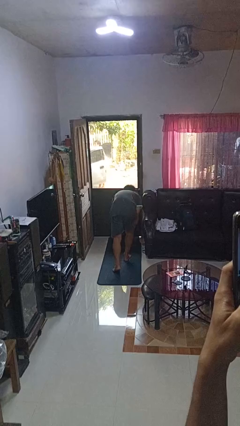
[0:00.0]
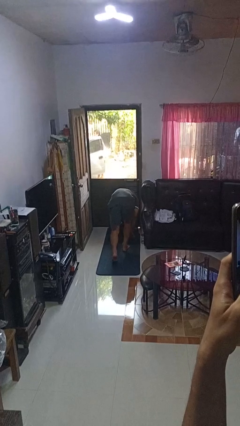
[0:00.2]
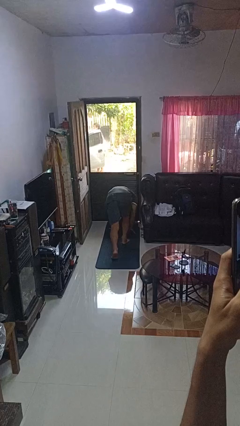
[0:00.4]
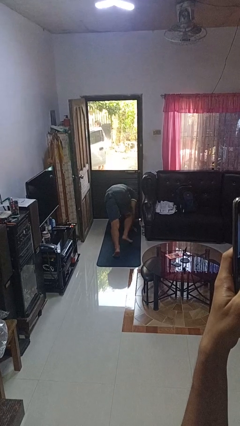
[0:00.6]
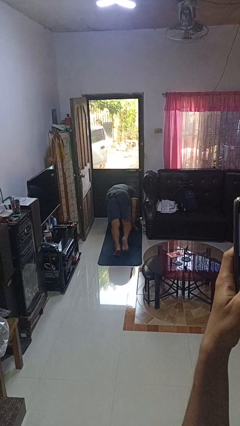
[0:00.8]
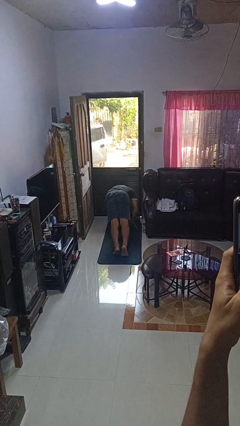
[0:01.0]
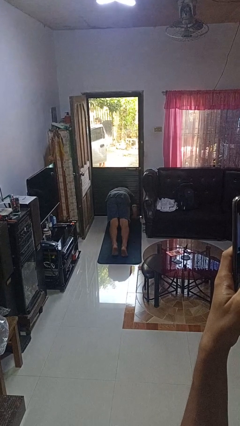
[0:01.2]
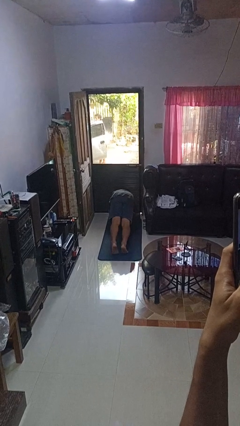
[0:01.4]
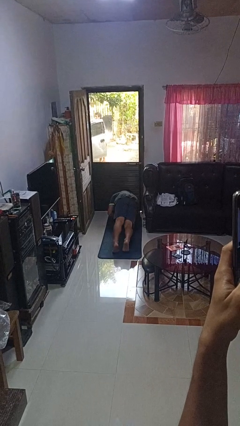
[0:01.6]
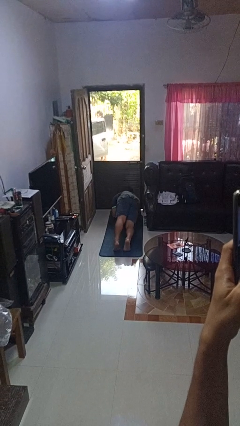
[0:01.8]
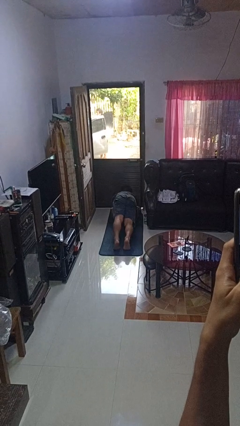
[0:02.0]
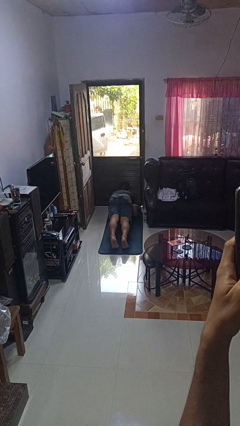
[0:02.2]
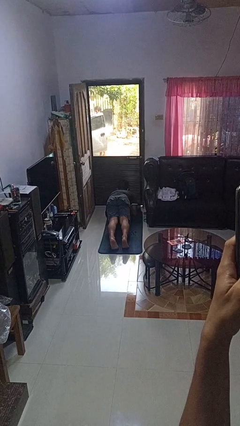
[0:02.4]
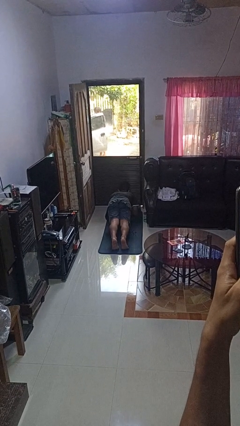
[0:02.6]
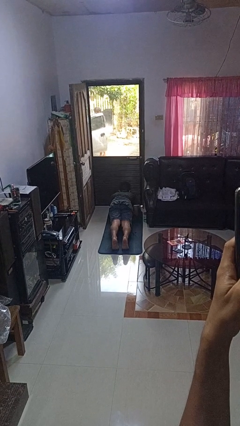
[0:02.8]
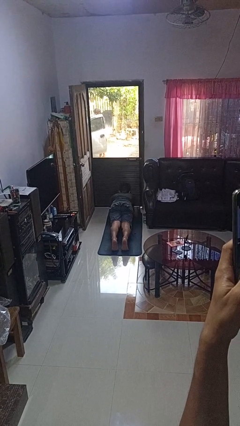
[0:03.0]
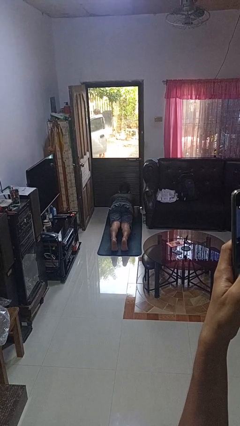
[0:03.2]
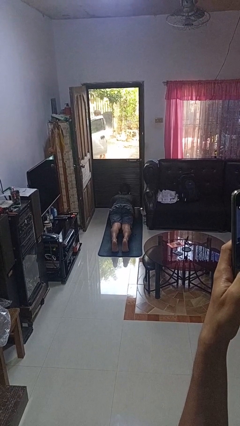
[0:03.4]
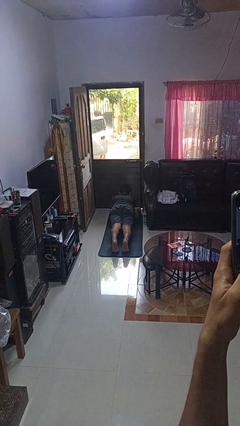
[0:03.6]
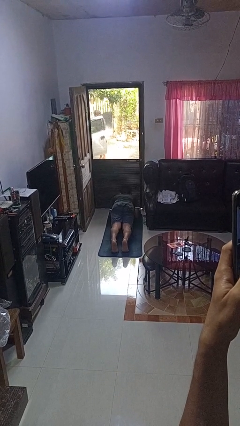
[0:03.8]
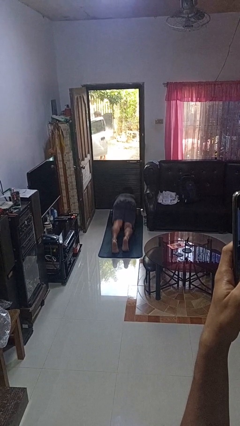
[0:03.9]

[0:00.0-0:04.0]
person exercises with plank

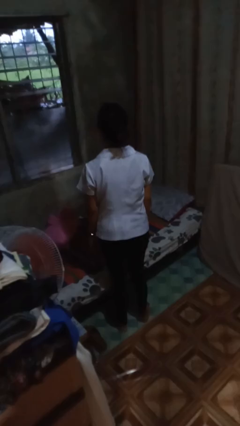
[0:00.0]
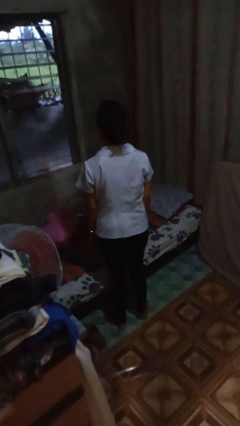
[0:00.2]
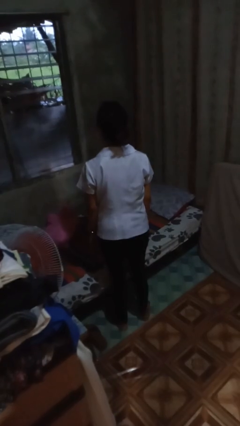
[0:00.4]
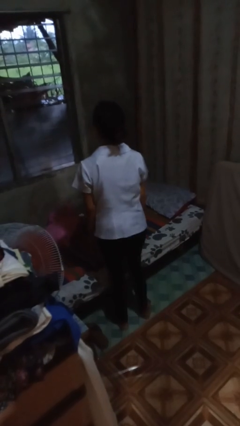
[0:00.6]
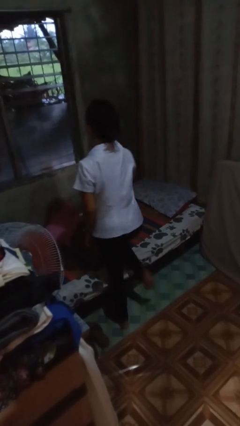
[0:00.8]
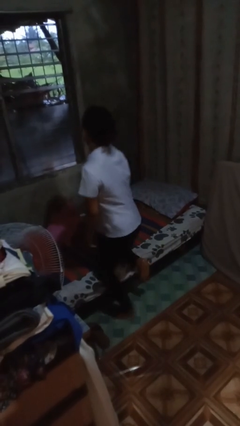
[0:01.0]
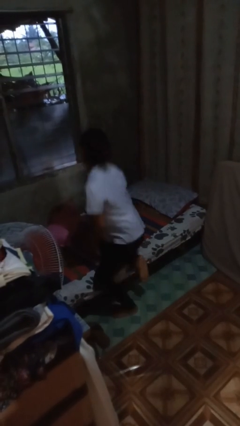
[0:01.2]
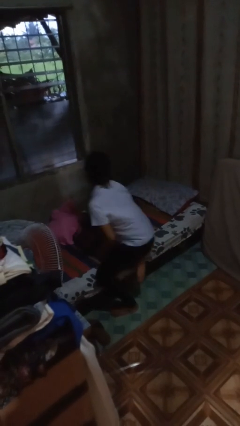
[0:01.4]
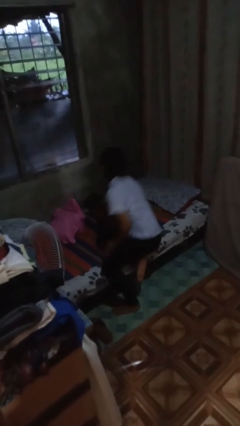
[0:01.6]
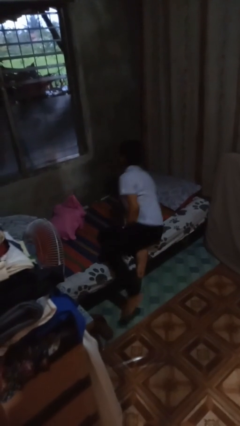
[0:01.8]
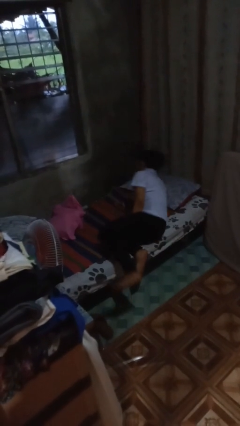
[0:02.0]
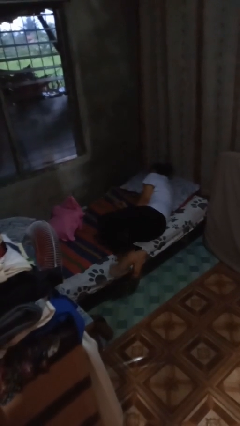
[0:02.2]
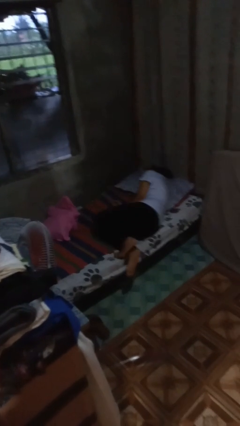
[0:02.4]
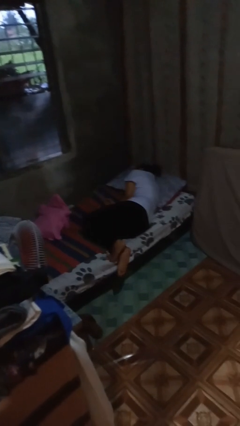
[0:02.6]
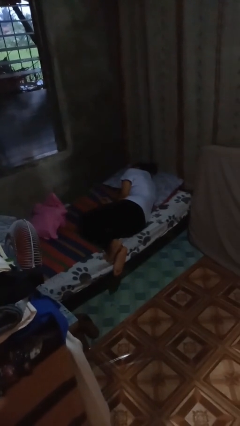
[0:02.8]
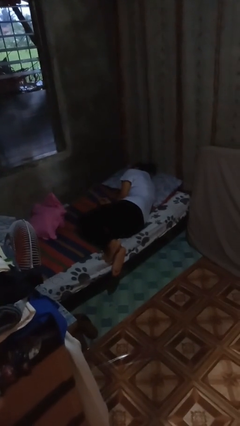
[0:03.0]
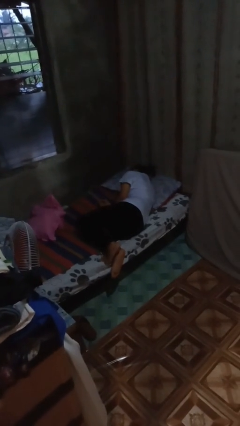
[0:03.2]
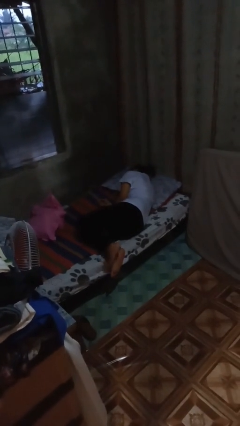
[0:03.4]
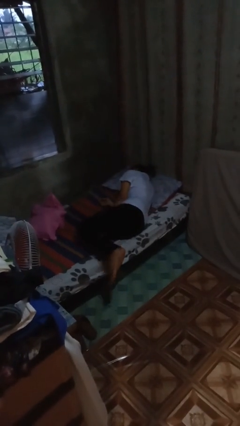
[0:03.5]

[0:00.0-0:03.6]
person lies down on bed

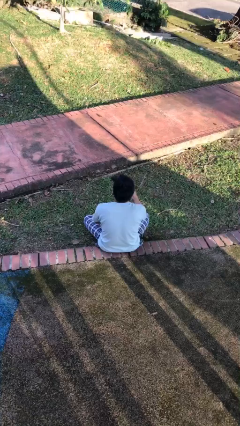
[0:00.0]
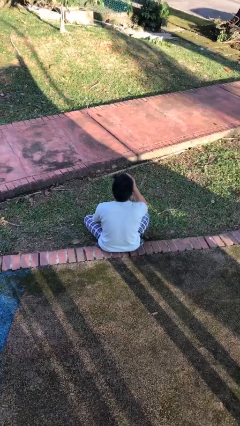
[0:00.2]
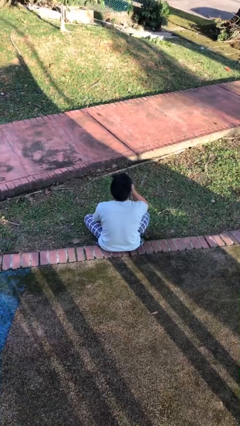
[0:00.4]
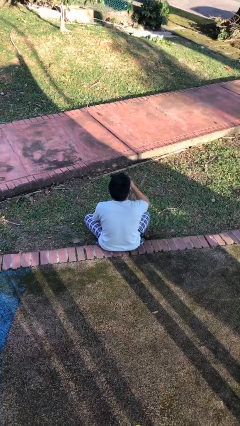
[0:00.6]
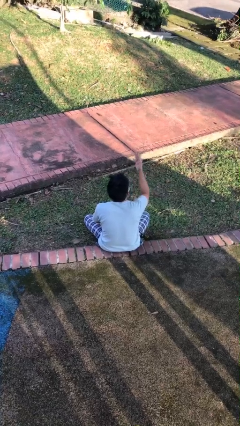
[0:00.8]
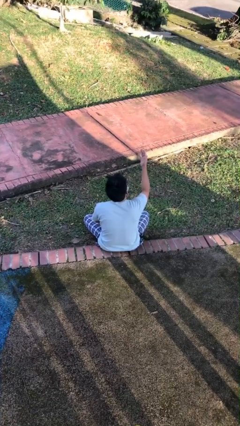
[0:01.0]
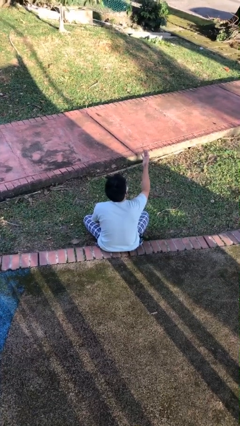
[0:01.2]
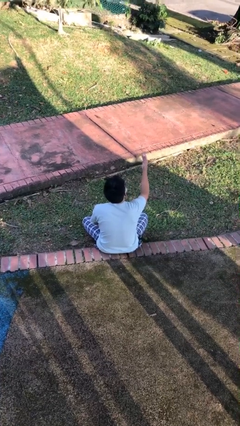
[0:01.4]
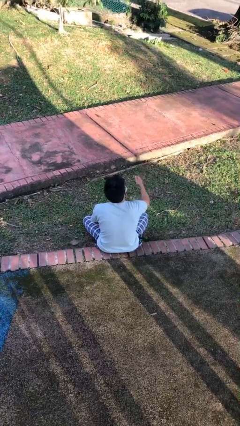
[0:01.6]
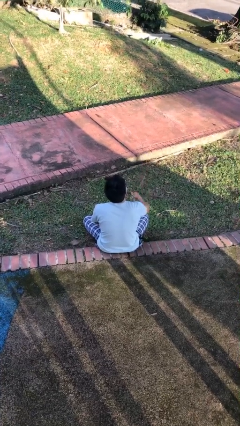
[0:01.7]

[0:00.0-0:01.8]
person gestures blow kiss

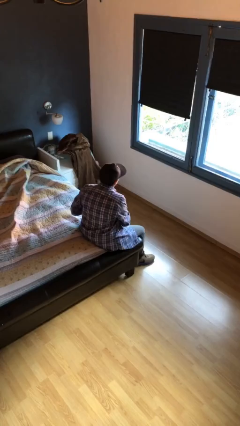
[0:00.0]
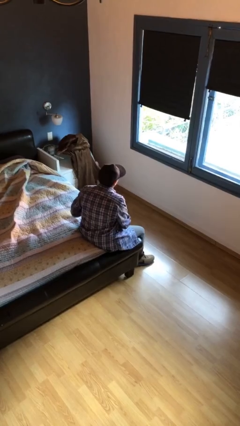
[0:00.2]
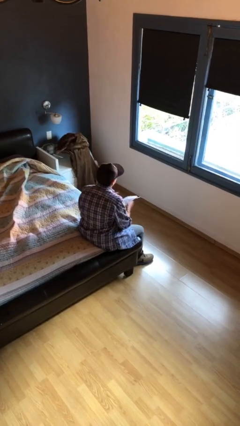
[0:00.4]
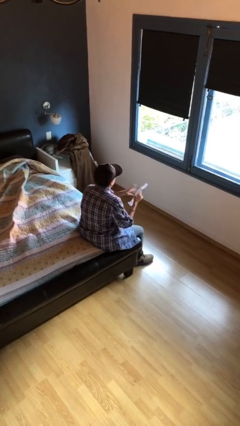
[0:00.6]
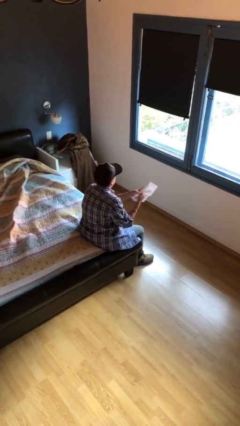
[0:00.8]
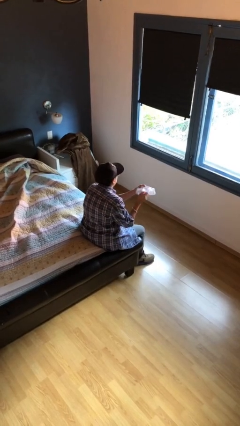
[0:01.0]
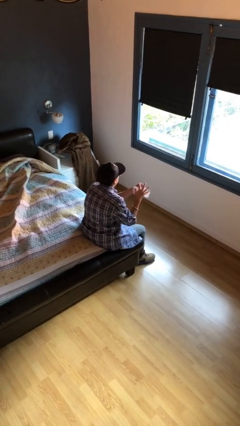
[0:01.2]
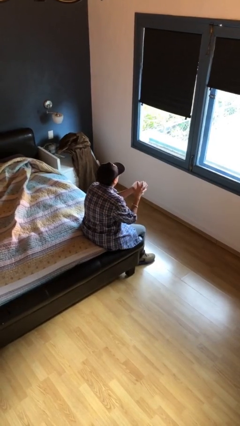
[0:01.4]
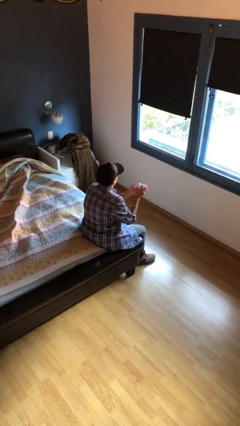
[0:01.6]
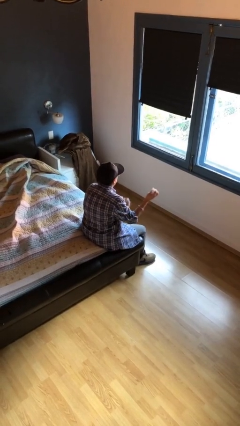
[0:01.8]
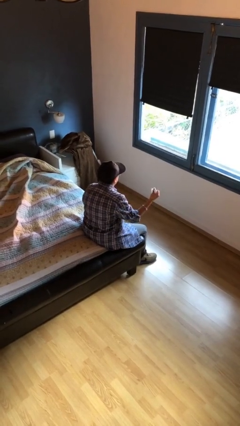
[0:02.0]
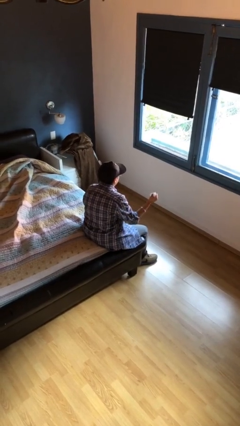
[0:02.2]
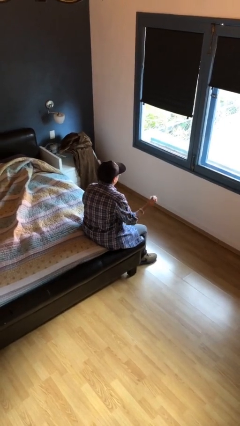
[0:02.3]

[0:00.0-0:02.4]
person crumples paper

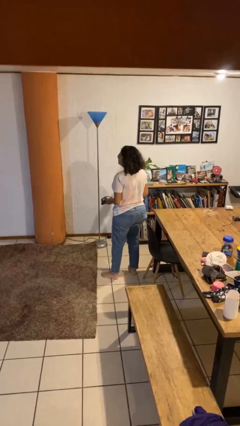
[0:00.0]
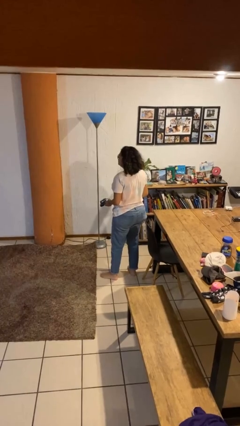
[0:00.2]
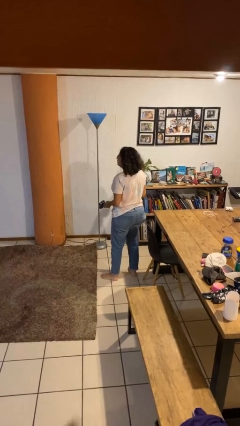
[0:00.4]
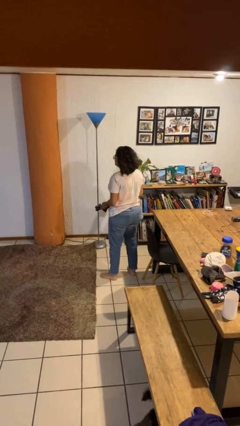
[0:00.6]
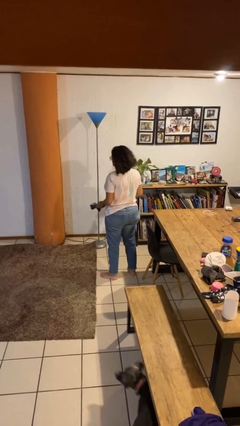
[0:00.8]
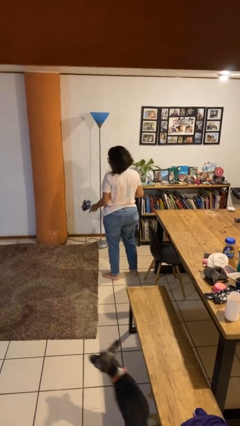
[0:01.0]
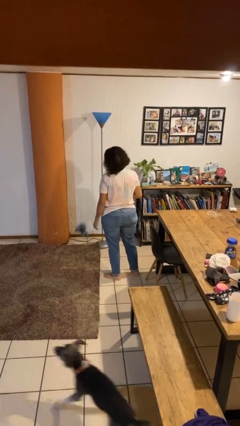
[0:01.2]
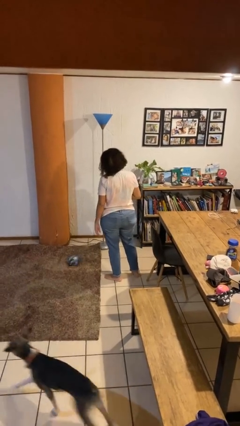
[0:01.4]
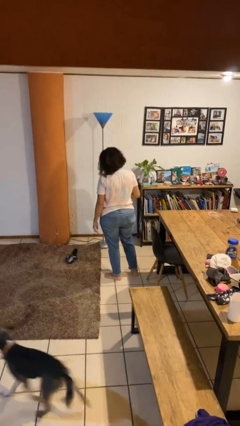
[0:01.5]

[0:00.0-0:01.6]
person throws object to ground

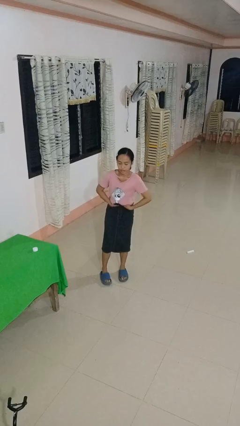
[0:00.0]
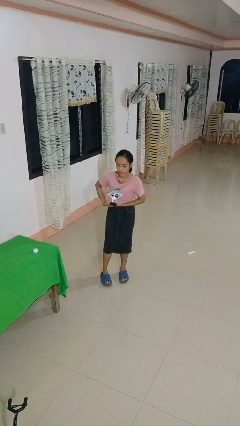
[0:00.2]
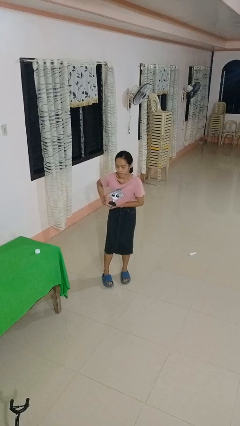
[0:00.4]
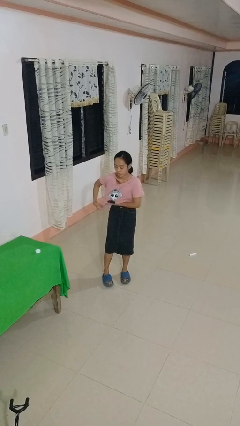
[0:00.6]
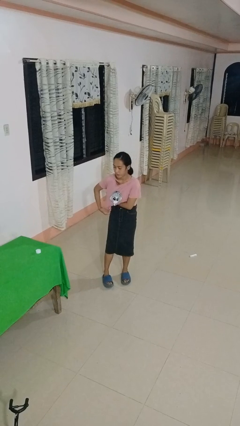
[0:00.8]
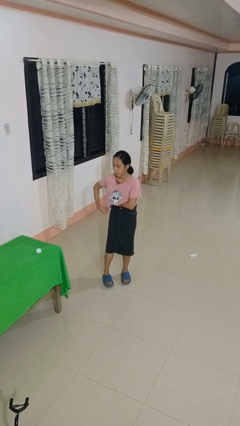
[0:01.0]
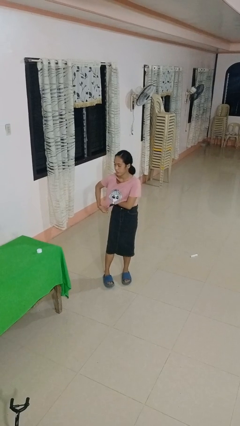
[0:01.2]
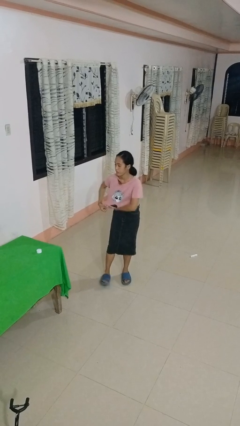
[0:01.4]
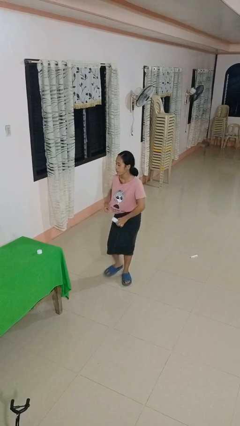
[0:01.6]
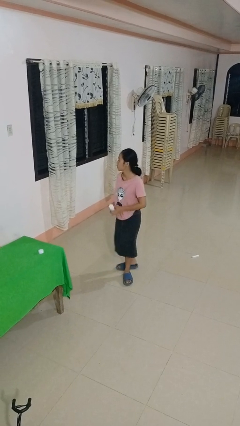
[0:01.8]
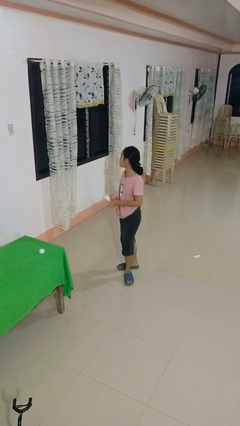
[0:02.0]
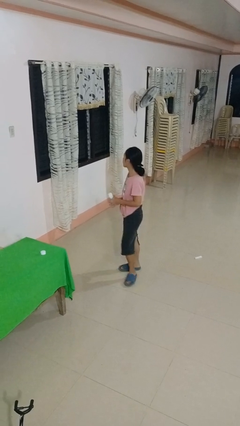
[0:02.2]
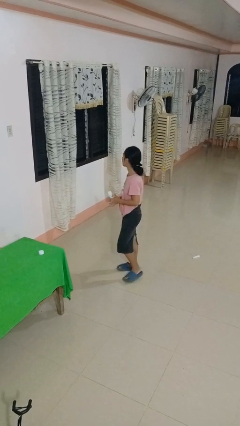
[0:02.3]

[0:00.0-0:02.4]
person applies deodorant

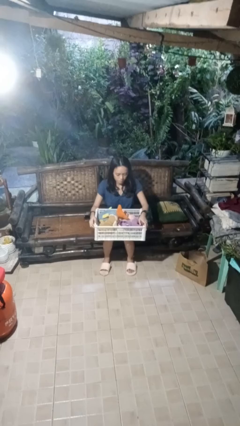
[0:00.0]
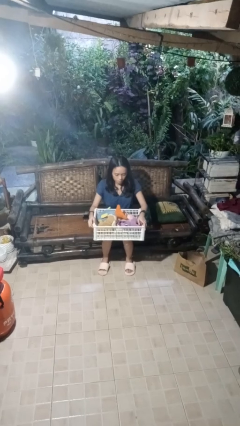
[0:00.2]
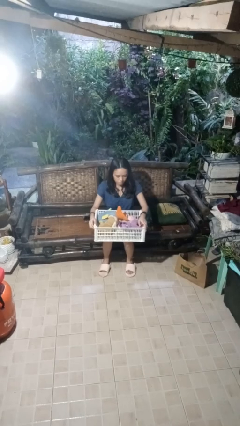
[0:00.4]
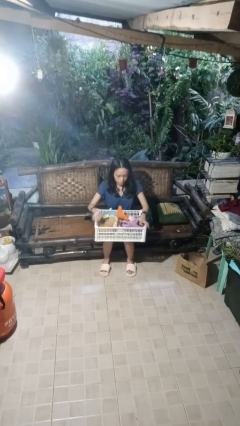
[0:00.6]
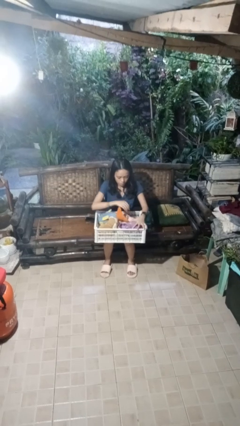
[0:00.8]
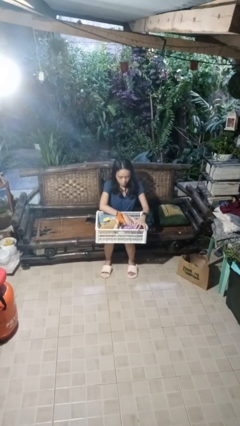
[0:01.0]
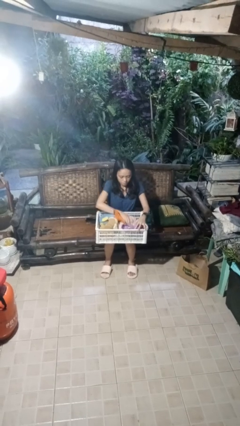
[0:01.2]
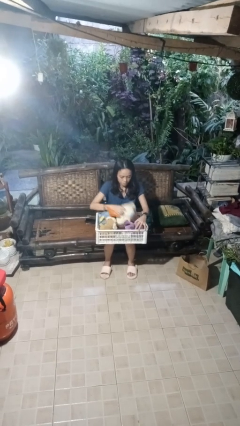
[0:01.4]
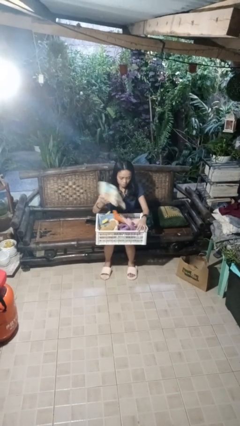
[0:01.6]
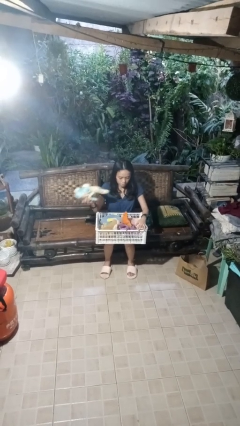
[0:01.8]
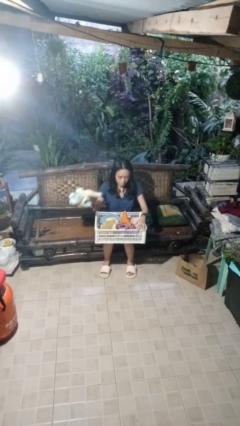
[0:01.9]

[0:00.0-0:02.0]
person takes object from basket
